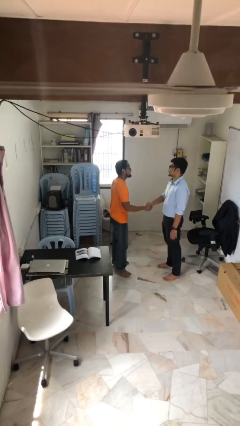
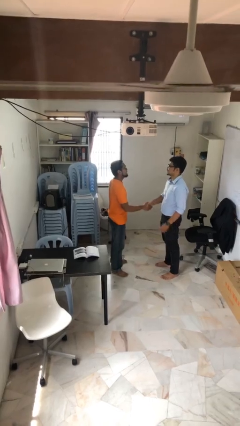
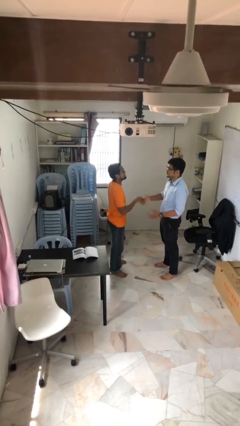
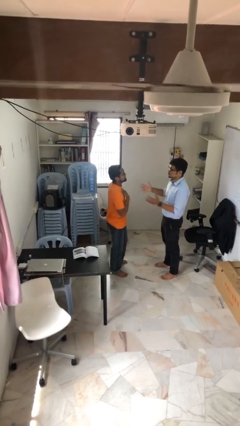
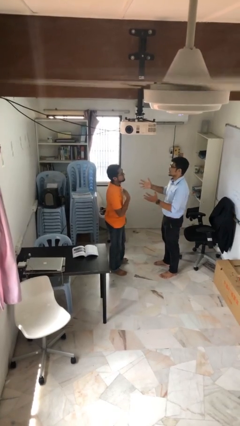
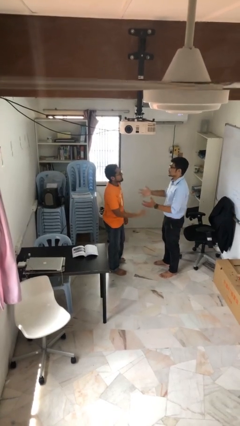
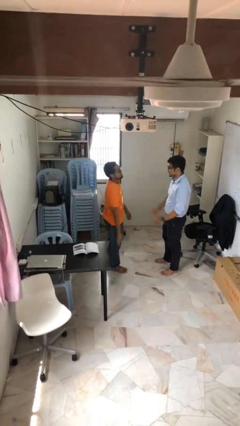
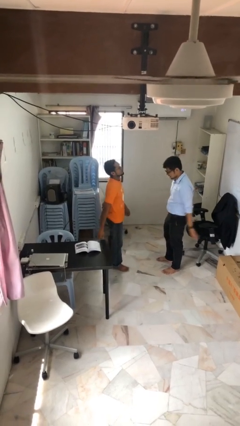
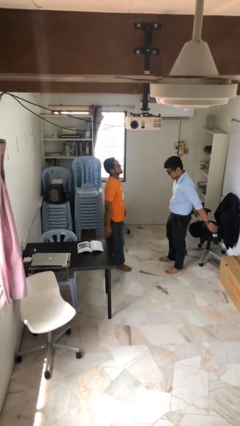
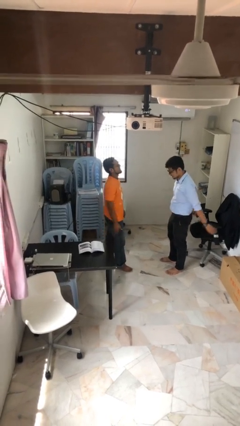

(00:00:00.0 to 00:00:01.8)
person talks to person

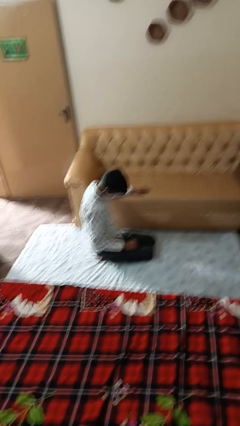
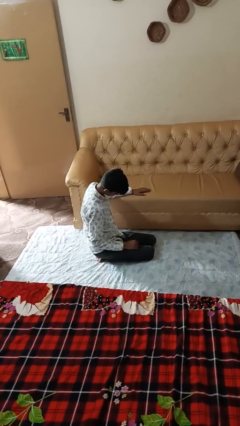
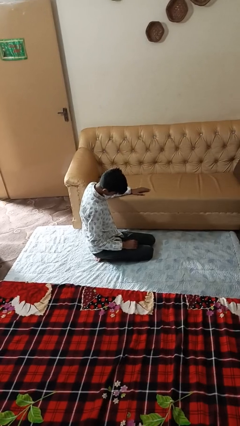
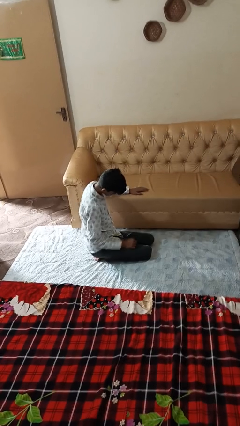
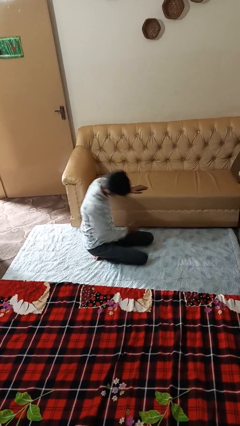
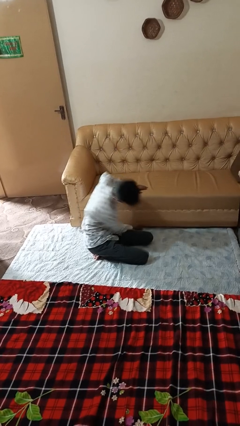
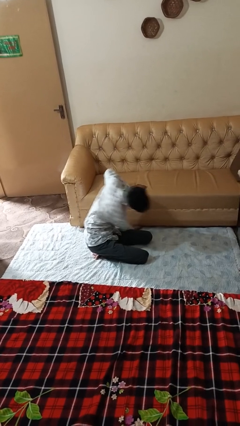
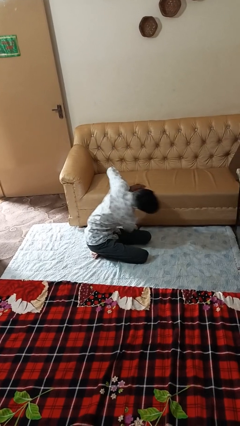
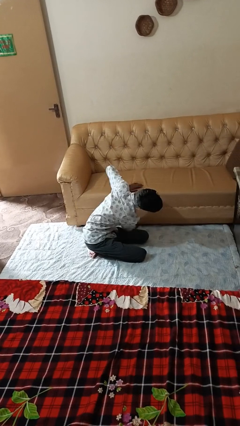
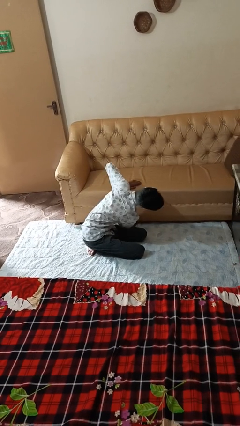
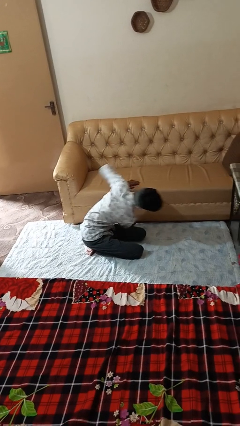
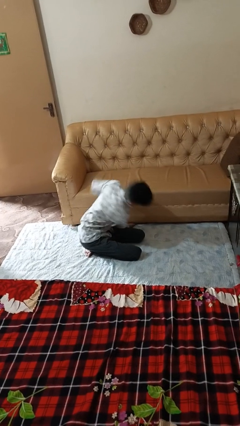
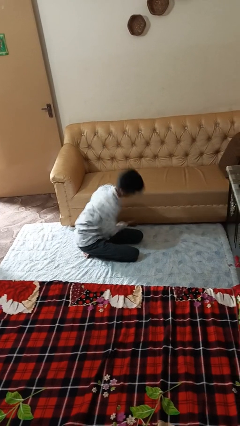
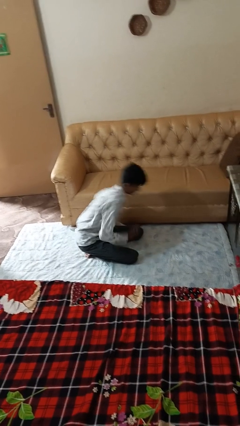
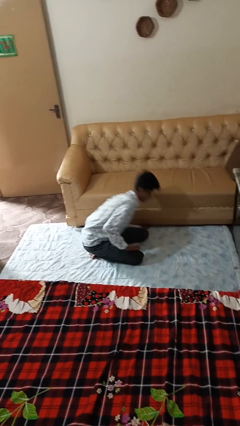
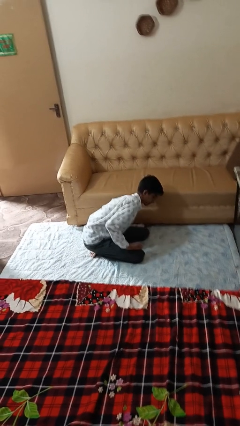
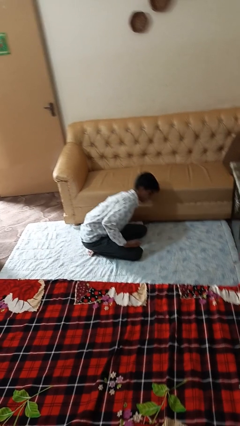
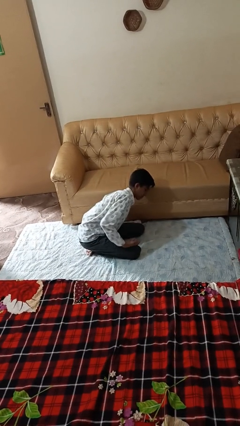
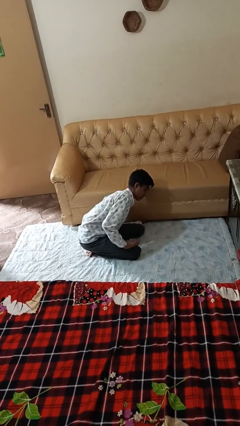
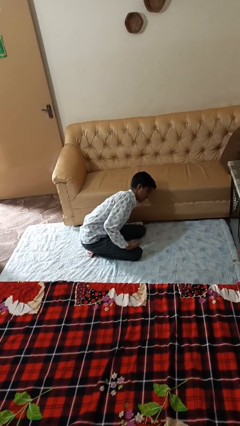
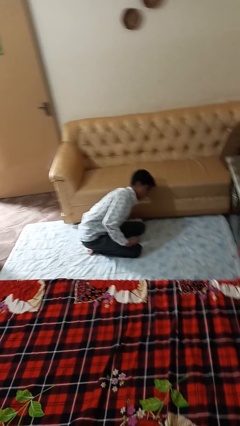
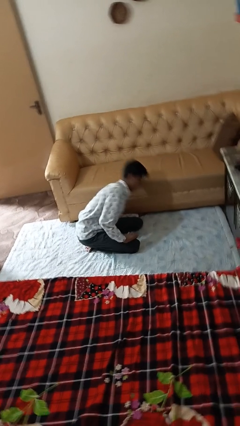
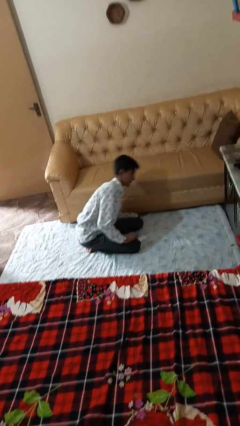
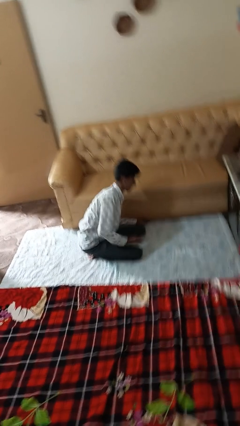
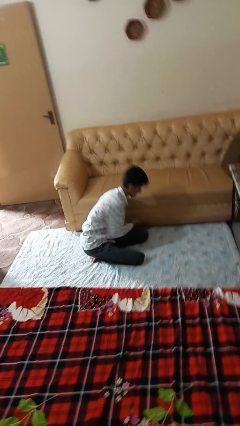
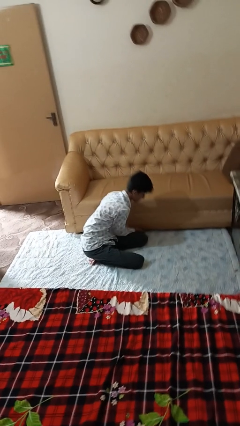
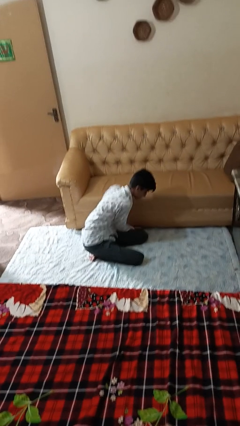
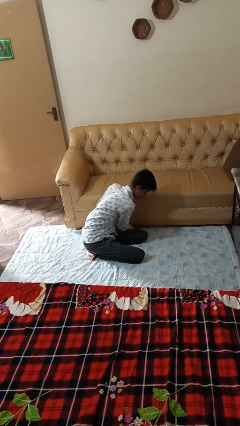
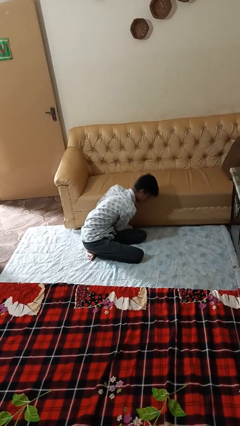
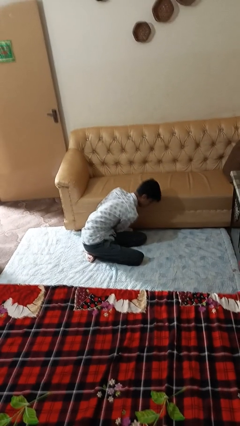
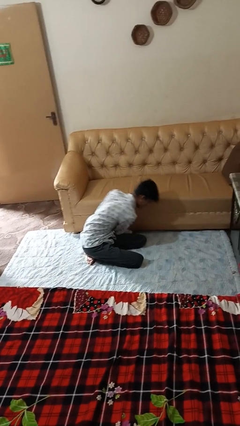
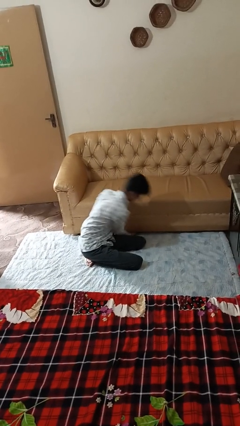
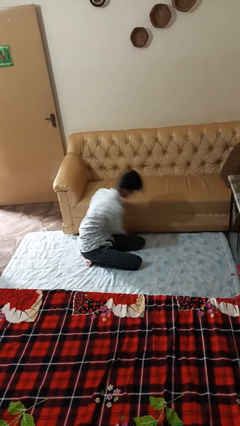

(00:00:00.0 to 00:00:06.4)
person searches under couch

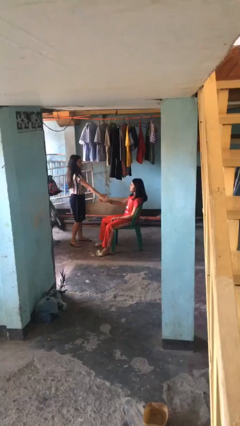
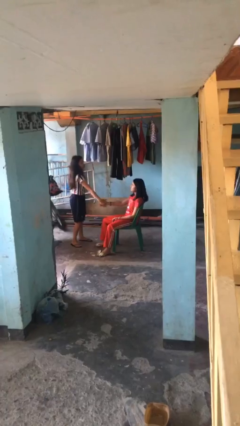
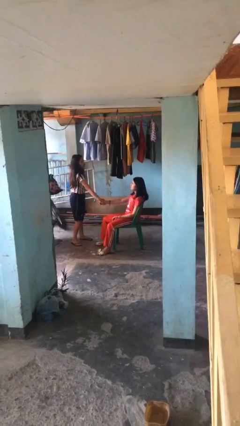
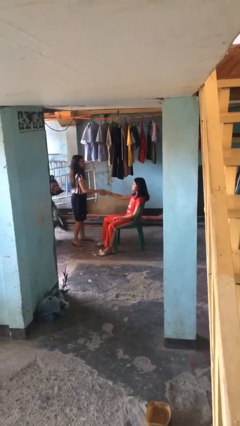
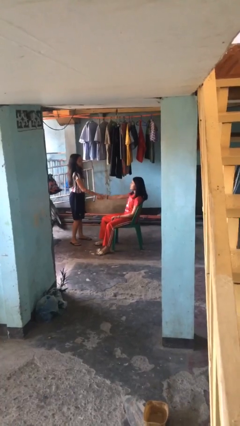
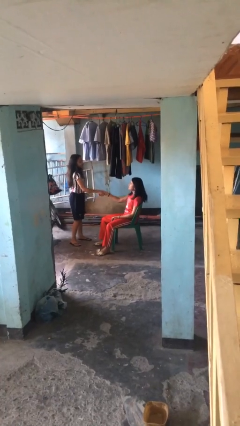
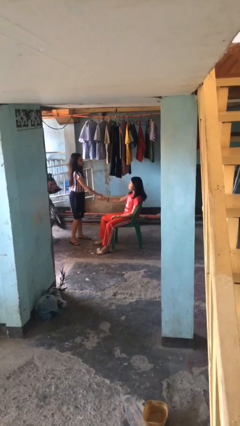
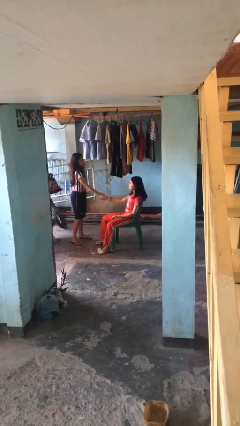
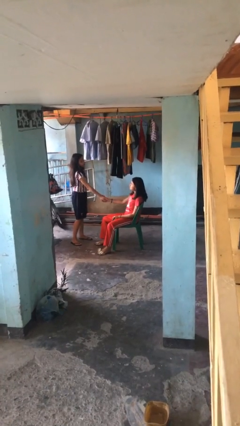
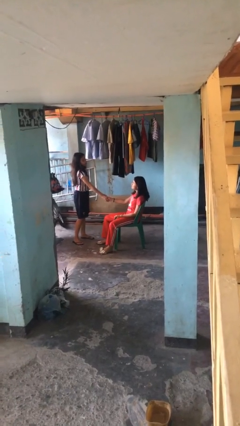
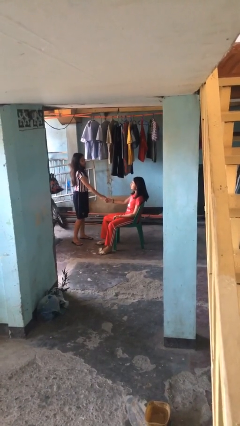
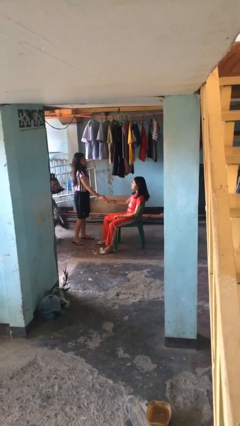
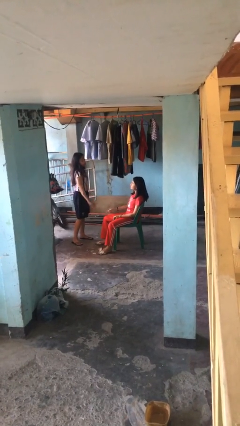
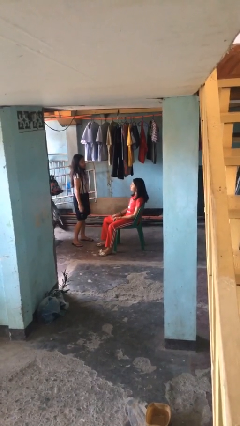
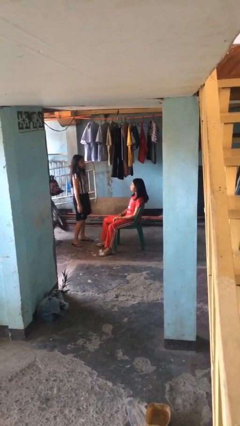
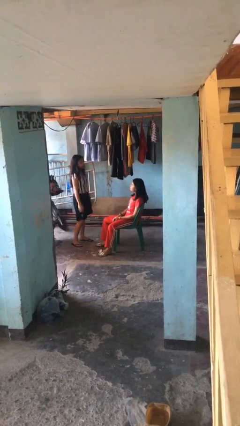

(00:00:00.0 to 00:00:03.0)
person shakes hand

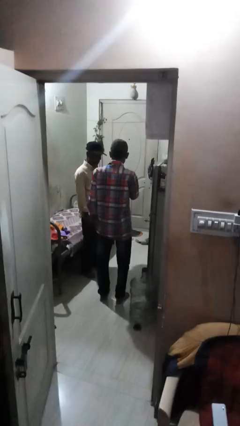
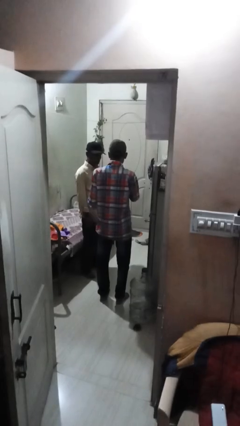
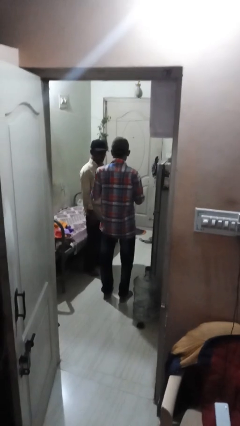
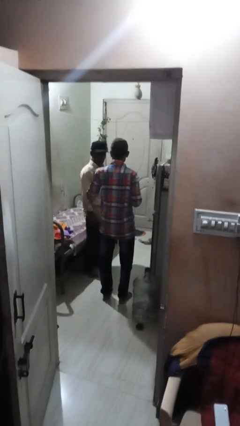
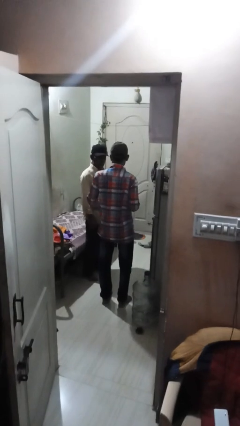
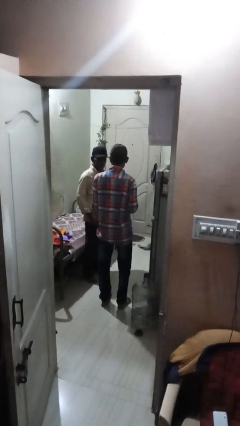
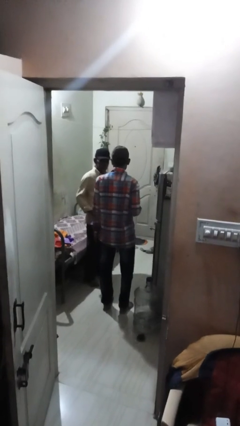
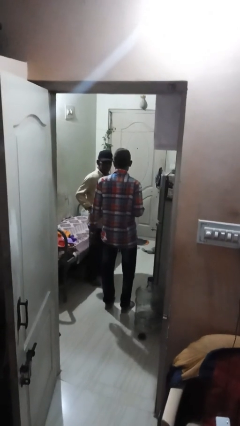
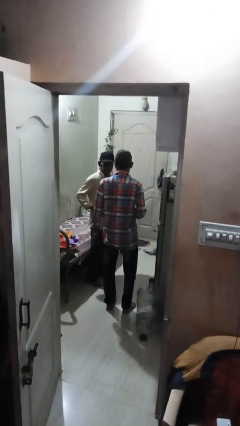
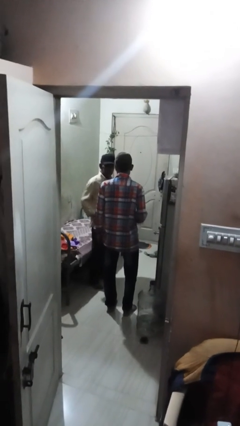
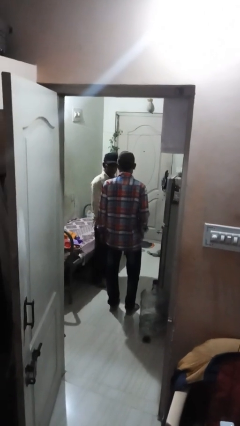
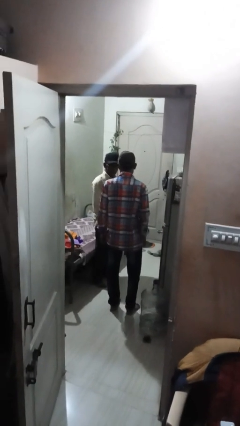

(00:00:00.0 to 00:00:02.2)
person tickles person

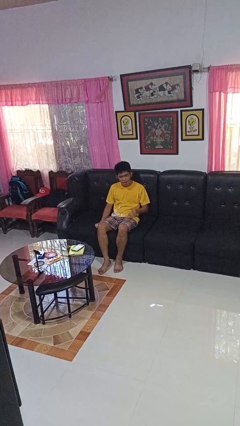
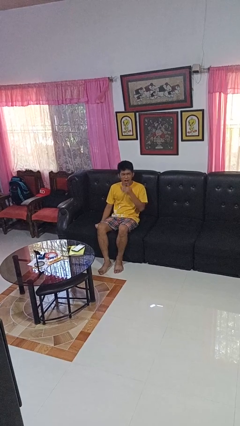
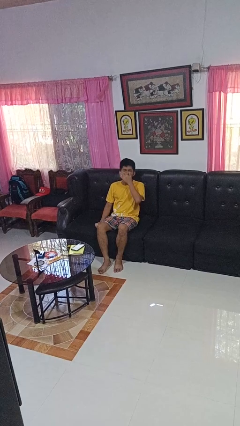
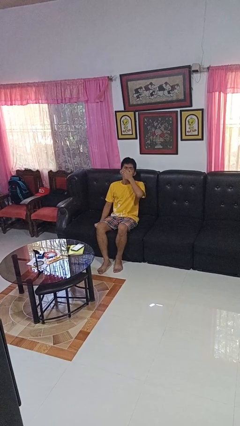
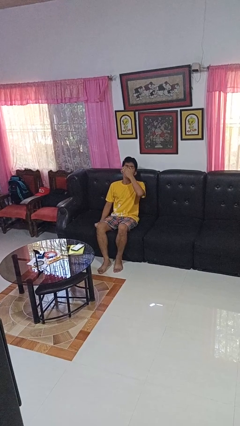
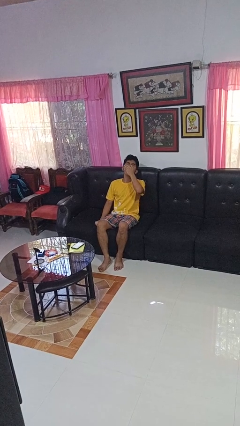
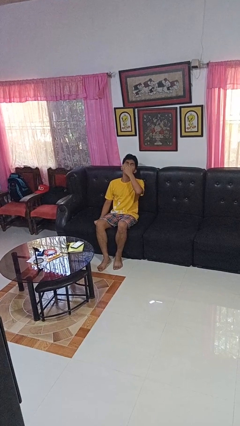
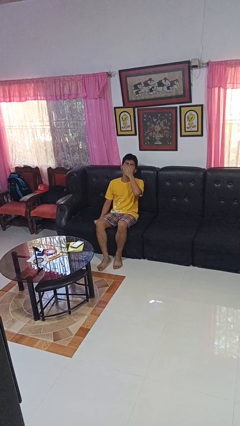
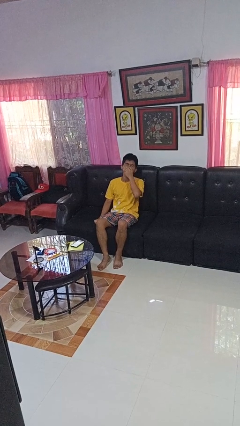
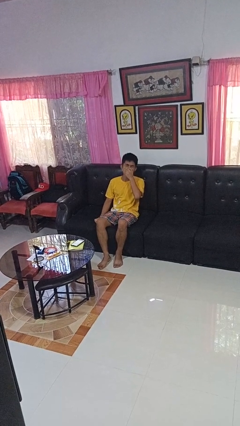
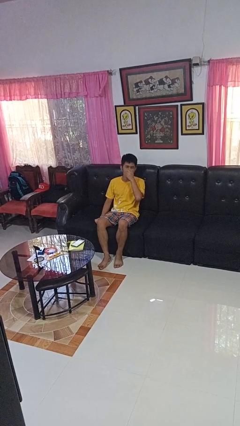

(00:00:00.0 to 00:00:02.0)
person yawns

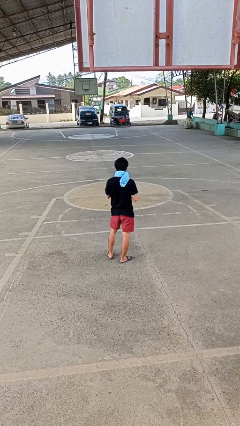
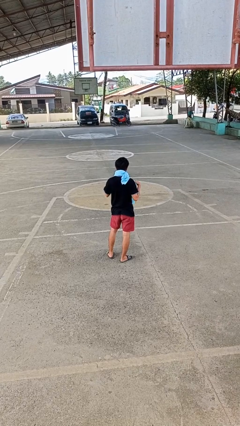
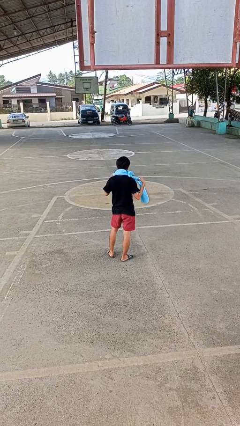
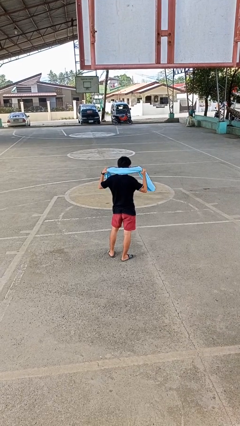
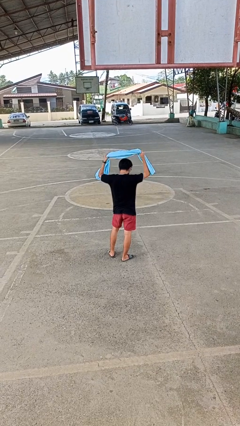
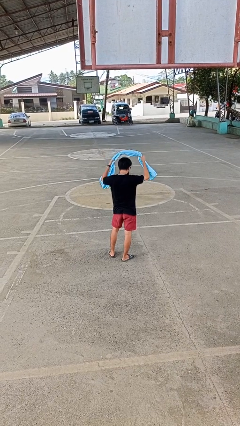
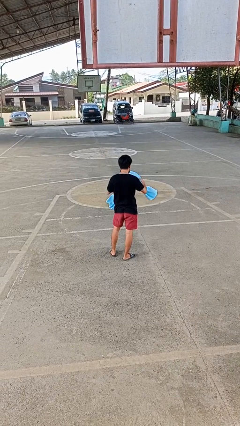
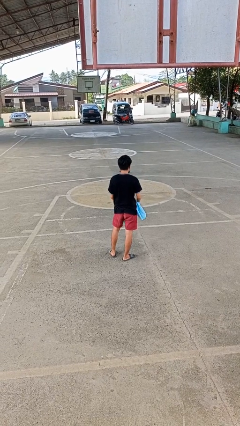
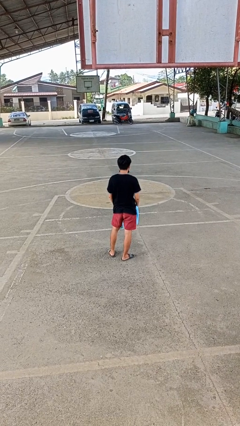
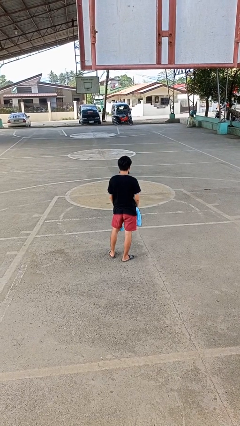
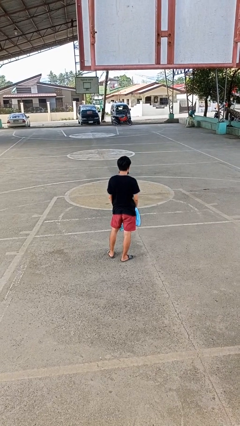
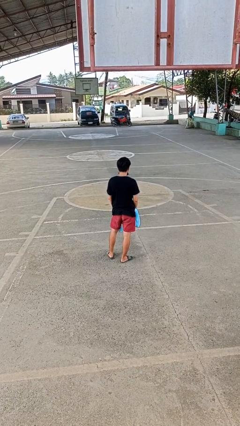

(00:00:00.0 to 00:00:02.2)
person takes off scarf
